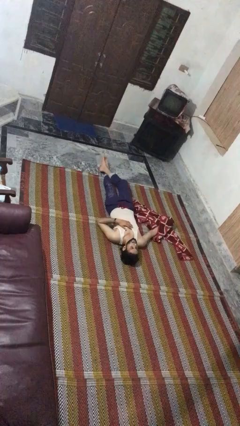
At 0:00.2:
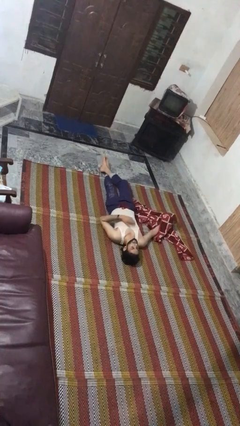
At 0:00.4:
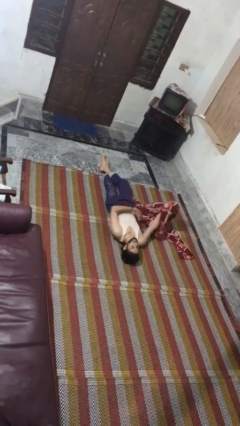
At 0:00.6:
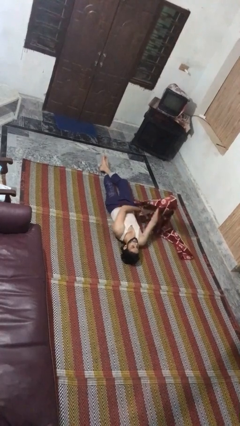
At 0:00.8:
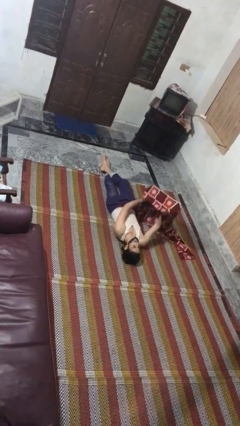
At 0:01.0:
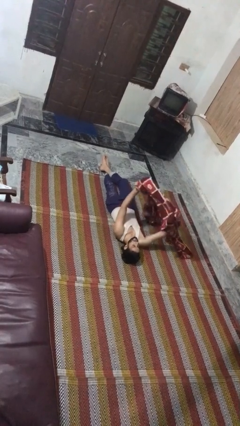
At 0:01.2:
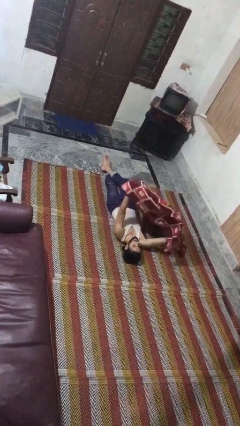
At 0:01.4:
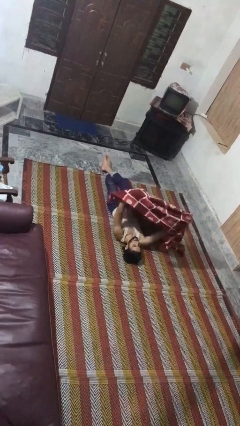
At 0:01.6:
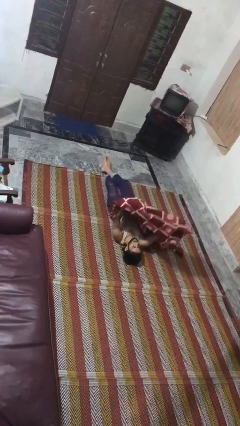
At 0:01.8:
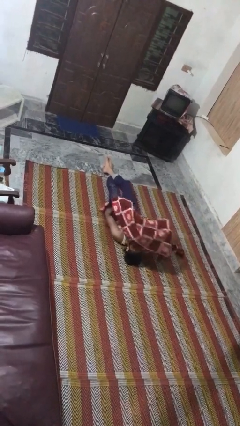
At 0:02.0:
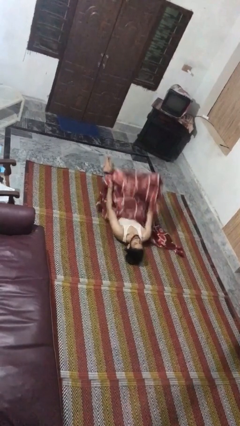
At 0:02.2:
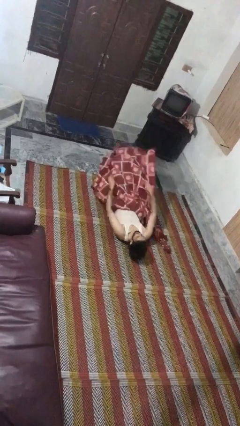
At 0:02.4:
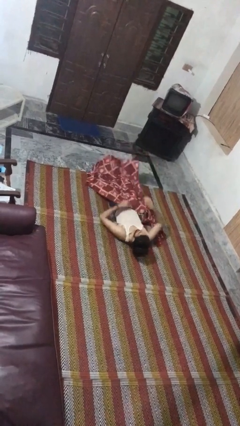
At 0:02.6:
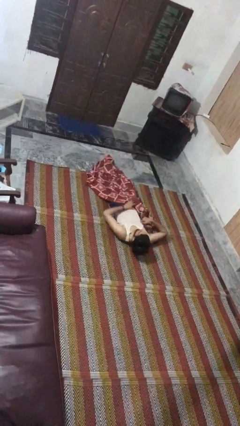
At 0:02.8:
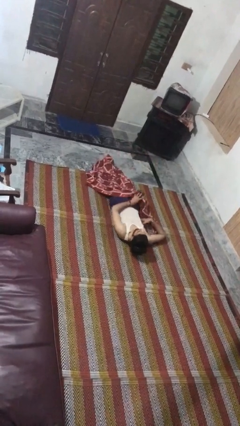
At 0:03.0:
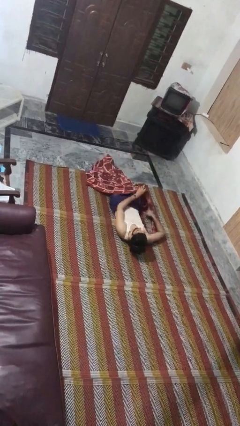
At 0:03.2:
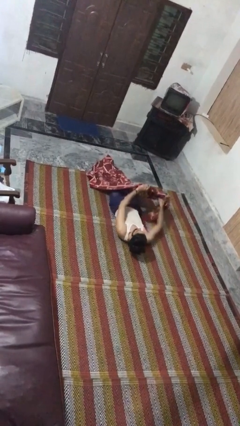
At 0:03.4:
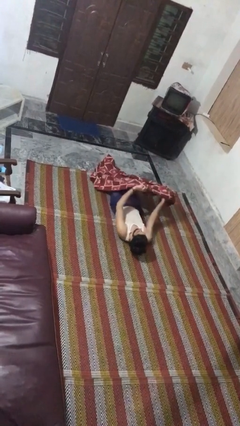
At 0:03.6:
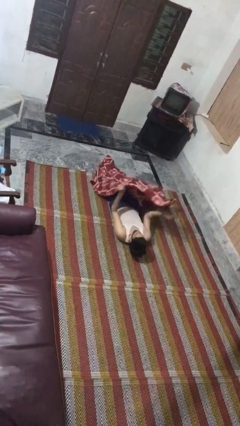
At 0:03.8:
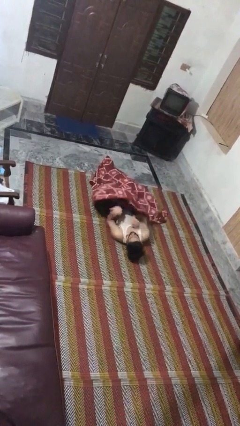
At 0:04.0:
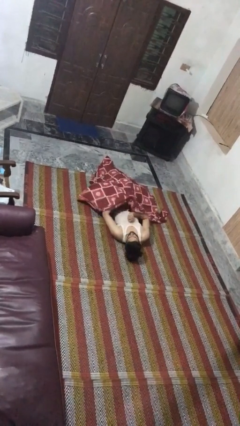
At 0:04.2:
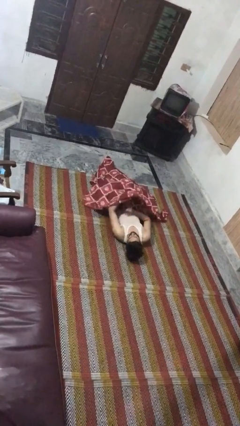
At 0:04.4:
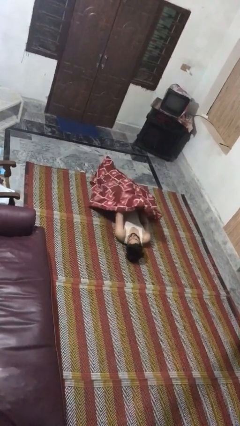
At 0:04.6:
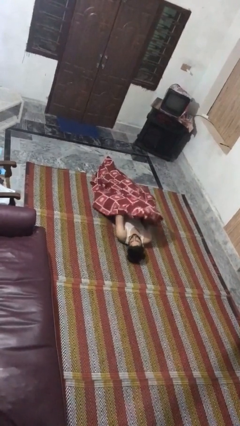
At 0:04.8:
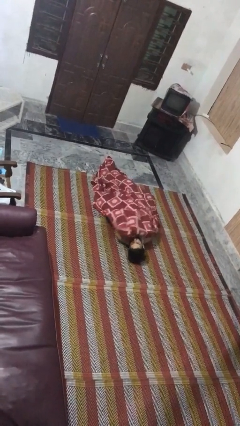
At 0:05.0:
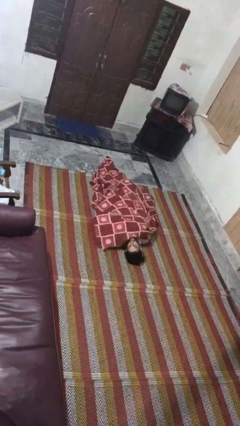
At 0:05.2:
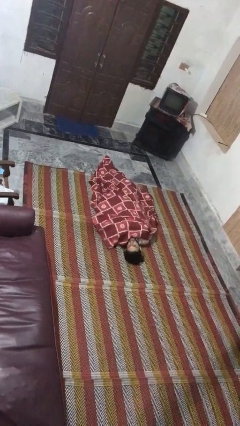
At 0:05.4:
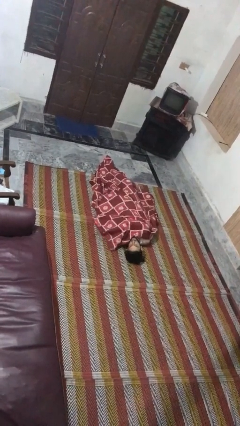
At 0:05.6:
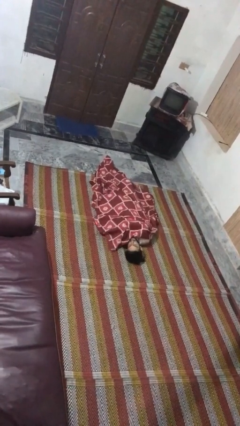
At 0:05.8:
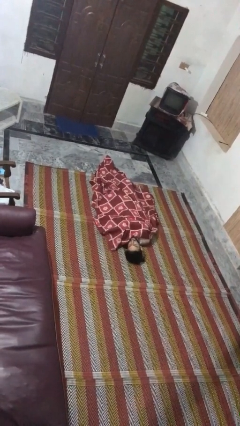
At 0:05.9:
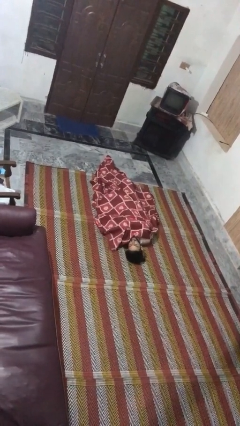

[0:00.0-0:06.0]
person covers with blanket

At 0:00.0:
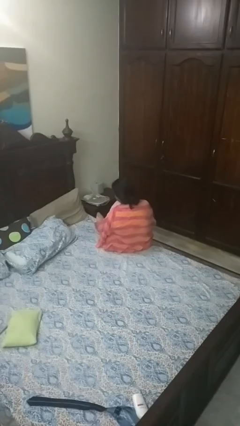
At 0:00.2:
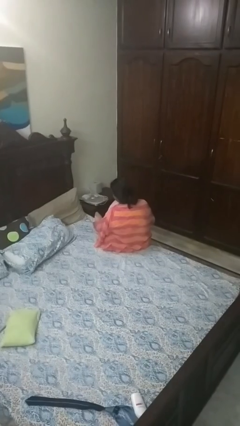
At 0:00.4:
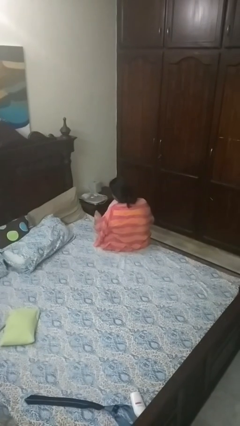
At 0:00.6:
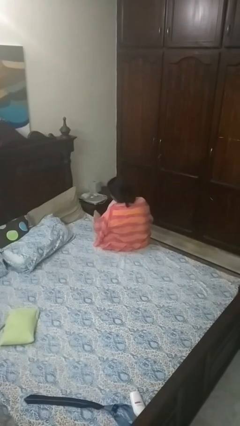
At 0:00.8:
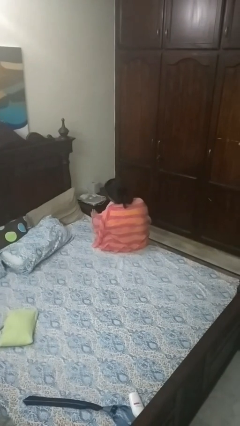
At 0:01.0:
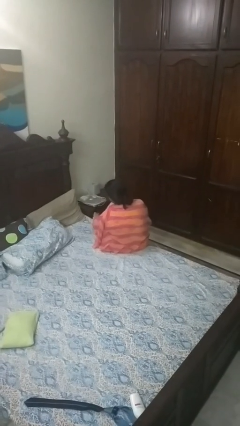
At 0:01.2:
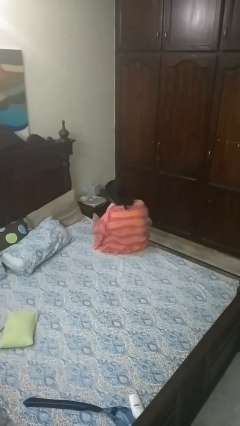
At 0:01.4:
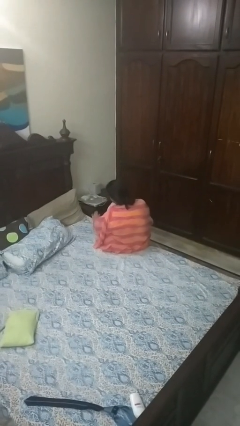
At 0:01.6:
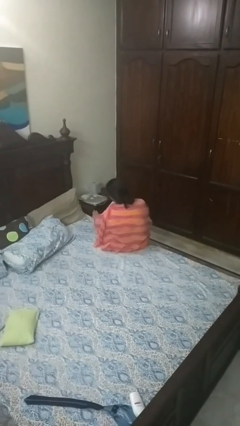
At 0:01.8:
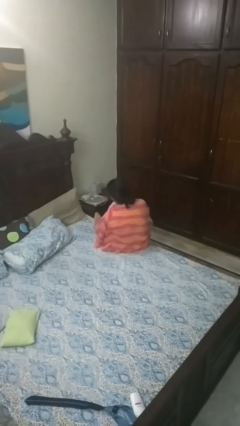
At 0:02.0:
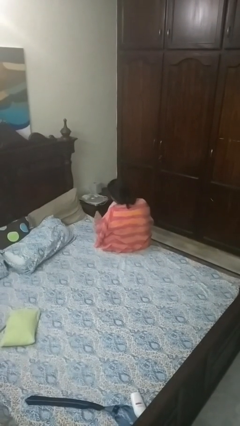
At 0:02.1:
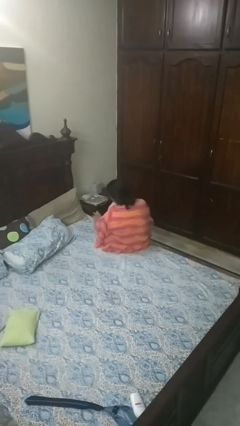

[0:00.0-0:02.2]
person rubs foot

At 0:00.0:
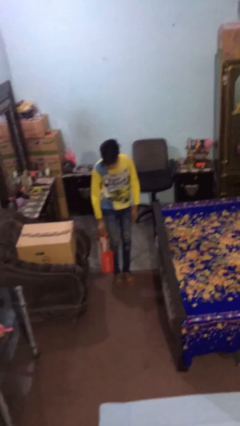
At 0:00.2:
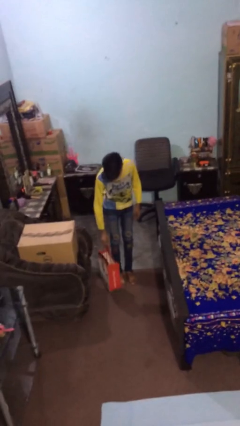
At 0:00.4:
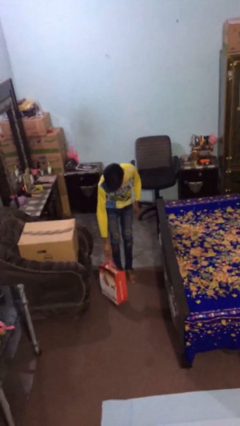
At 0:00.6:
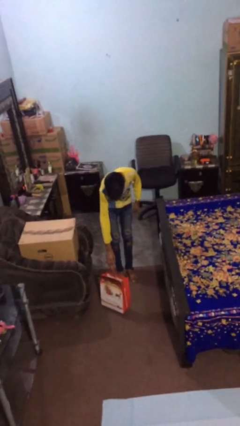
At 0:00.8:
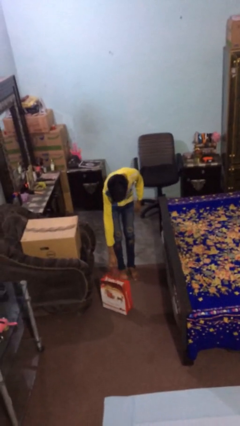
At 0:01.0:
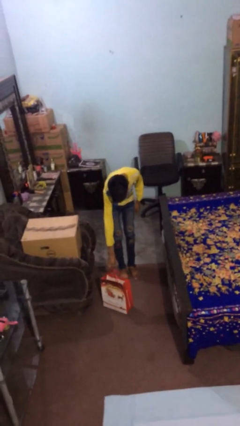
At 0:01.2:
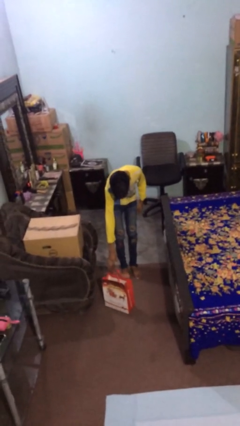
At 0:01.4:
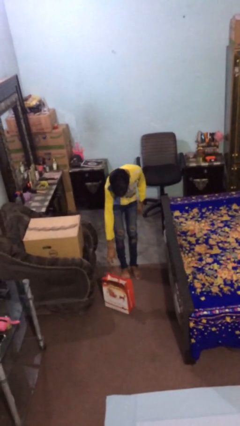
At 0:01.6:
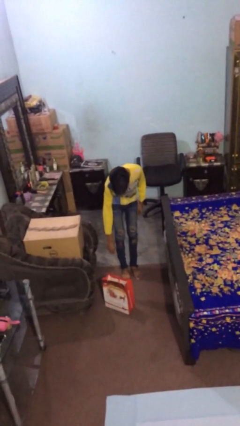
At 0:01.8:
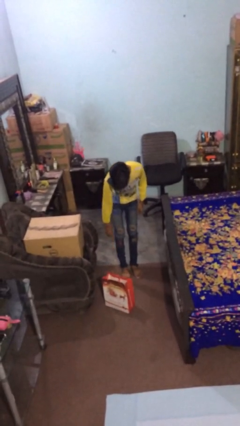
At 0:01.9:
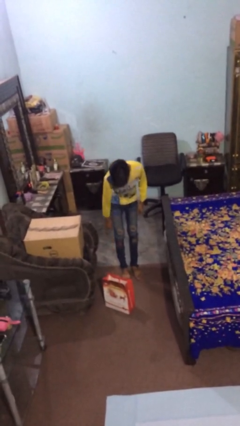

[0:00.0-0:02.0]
person puts down object on floor

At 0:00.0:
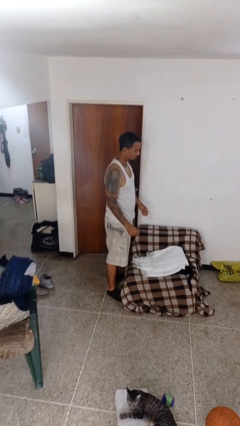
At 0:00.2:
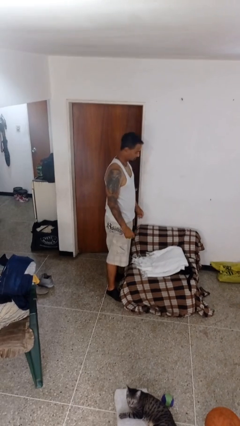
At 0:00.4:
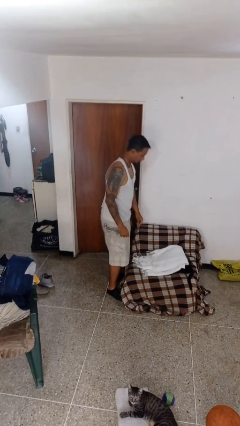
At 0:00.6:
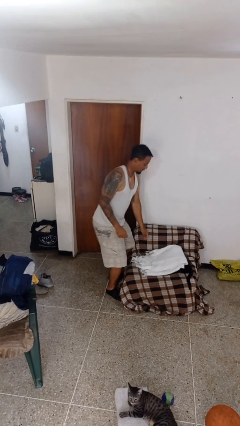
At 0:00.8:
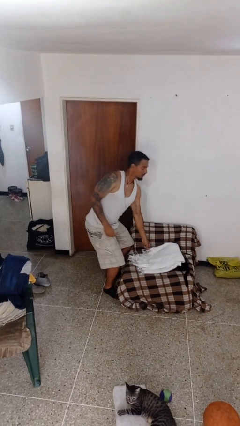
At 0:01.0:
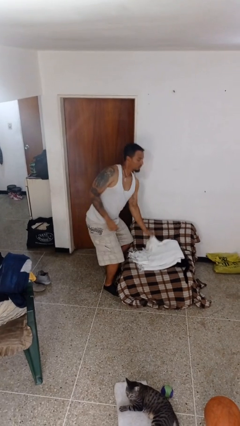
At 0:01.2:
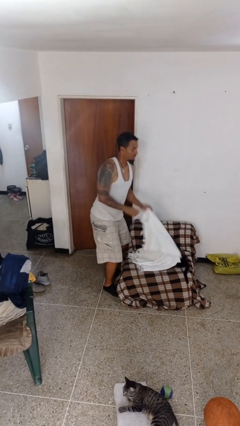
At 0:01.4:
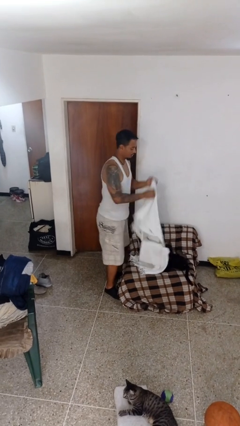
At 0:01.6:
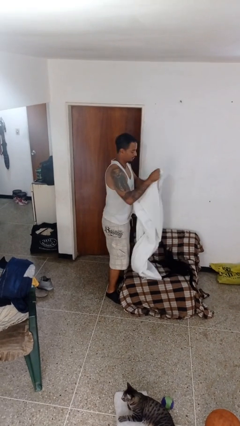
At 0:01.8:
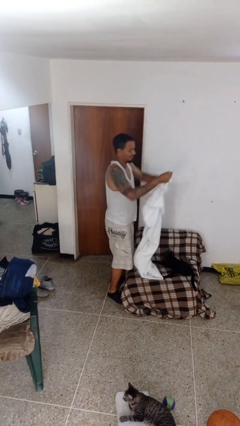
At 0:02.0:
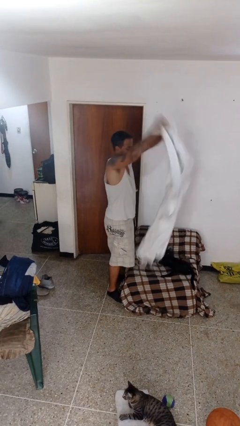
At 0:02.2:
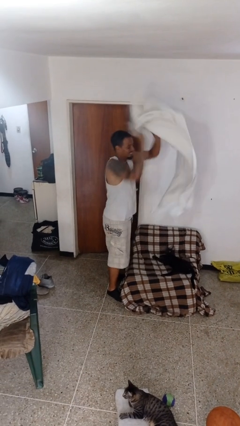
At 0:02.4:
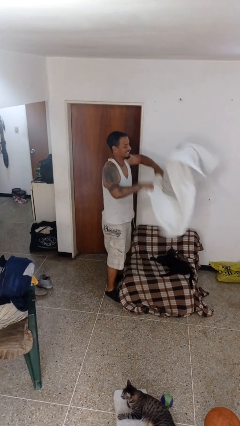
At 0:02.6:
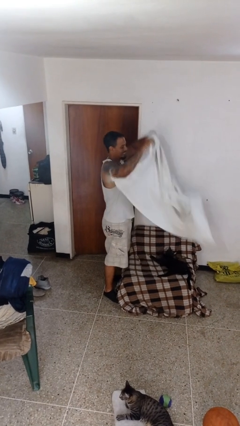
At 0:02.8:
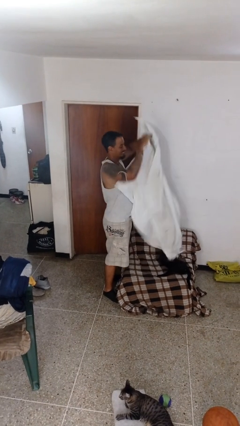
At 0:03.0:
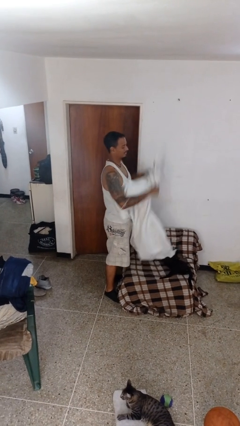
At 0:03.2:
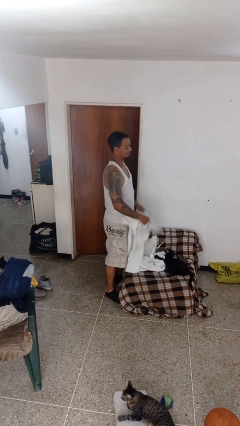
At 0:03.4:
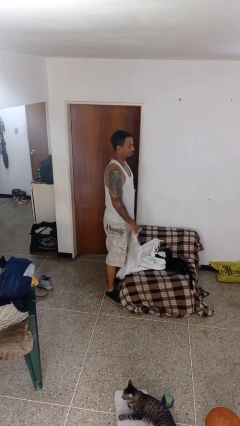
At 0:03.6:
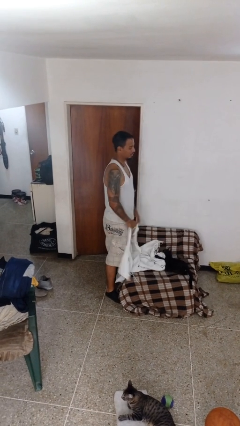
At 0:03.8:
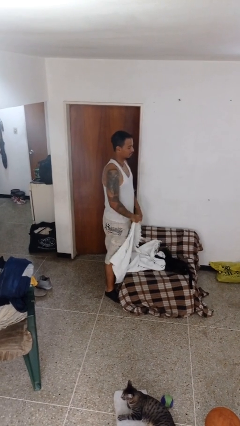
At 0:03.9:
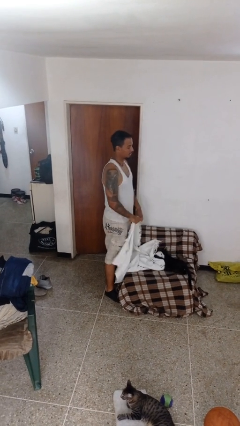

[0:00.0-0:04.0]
person unfolds blanket

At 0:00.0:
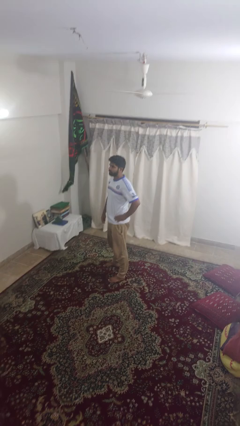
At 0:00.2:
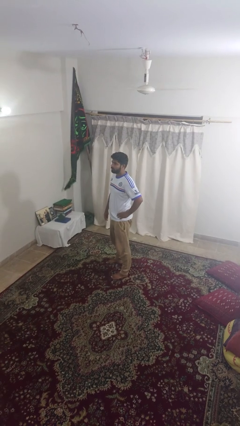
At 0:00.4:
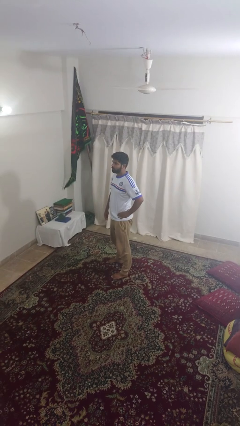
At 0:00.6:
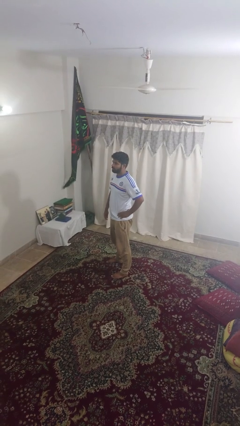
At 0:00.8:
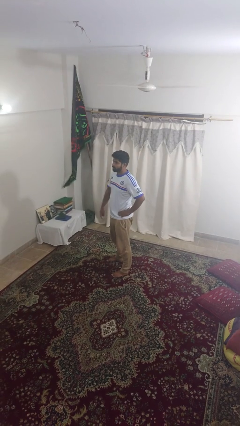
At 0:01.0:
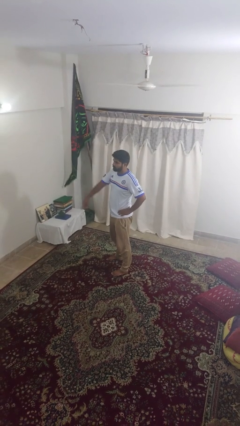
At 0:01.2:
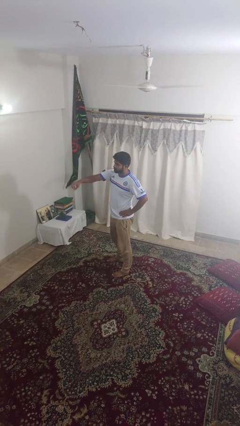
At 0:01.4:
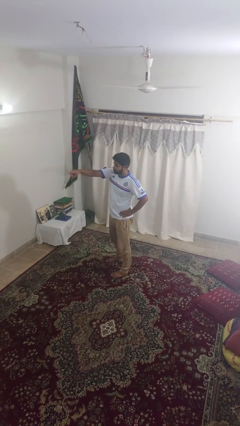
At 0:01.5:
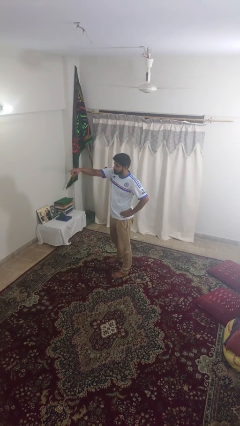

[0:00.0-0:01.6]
person points at person

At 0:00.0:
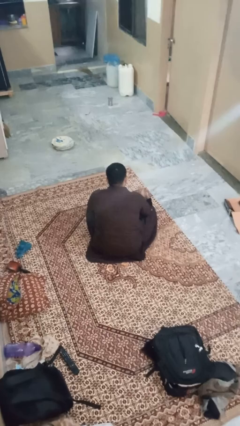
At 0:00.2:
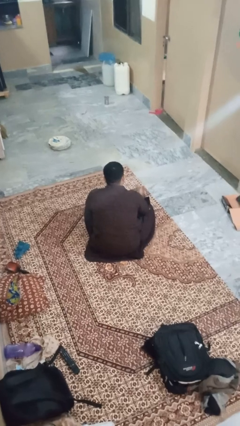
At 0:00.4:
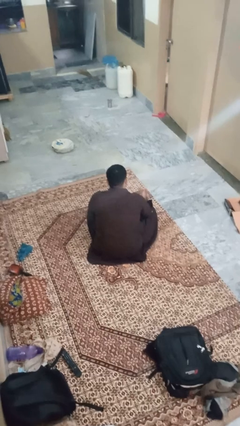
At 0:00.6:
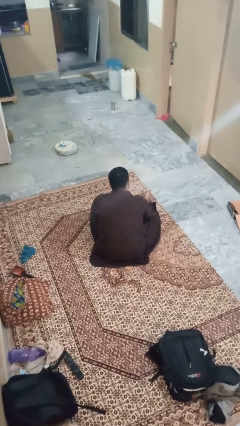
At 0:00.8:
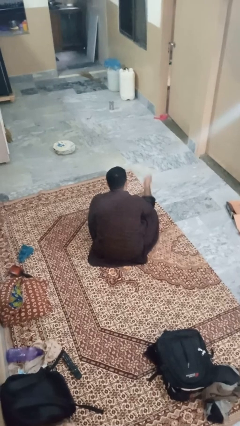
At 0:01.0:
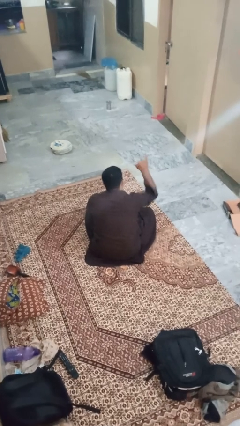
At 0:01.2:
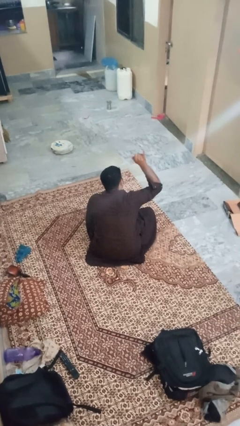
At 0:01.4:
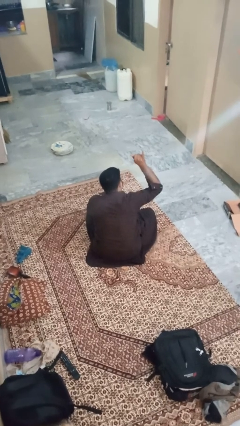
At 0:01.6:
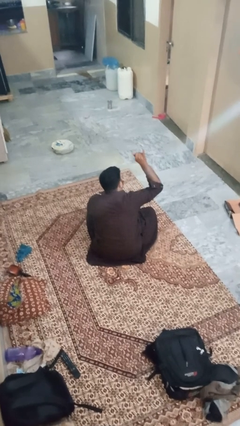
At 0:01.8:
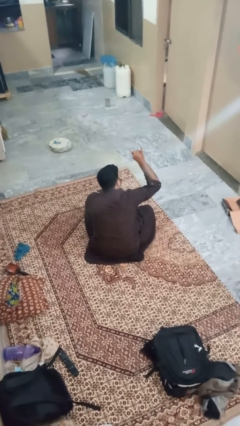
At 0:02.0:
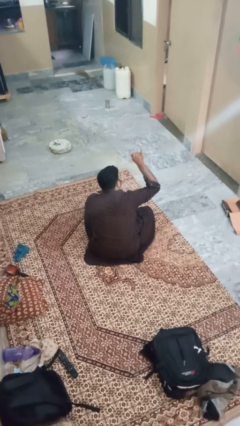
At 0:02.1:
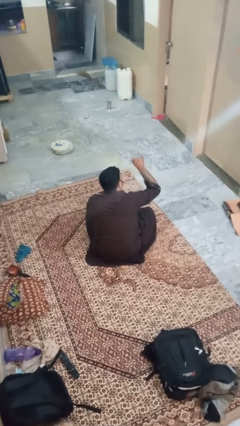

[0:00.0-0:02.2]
person gestures hang loose
